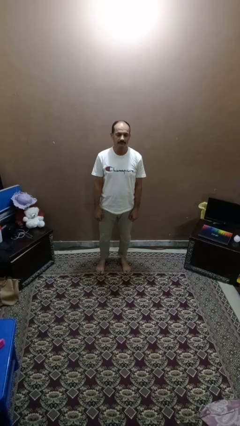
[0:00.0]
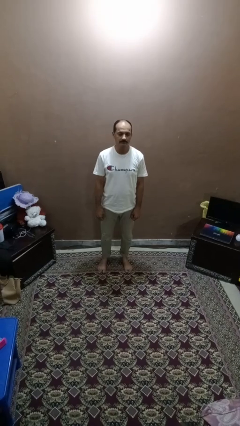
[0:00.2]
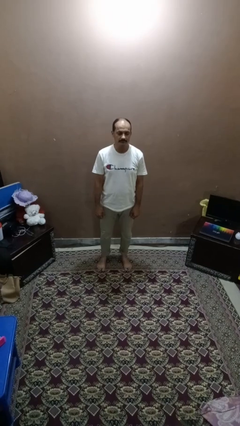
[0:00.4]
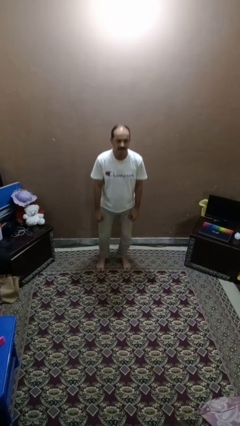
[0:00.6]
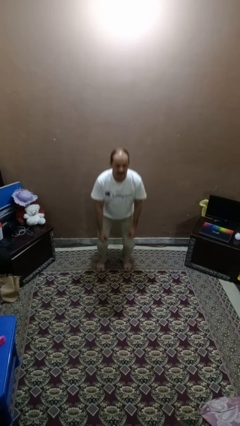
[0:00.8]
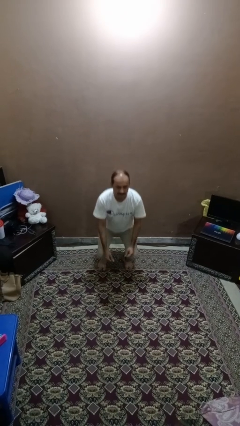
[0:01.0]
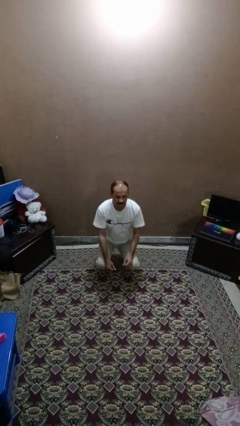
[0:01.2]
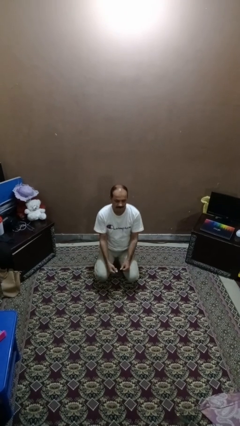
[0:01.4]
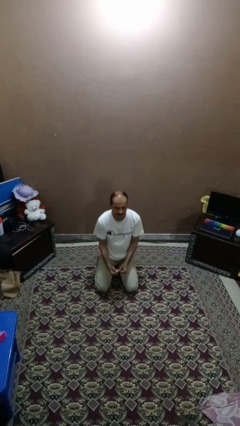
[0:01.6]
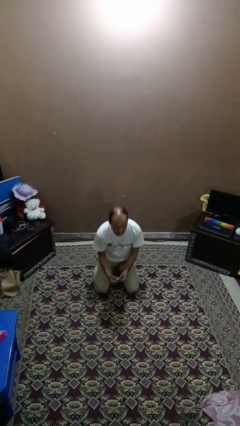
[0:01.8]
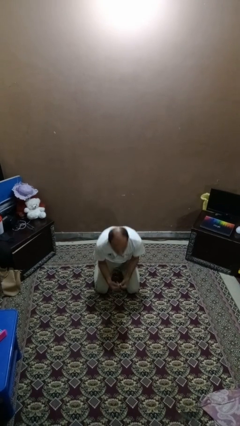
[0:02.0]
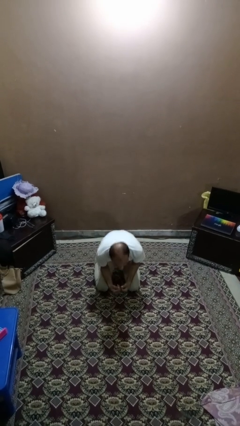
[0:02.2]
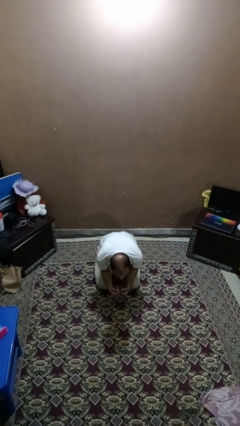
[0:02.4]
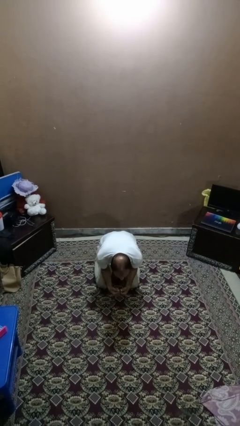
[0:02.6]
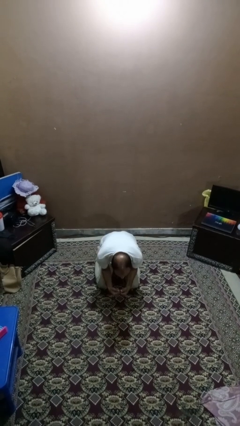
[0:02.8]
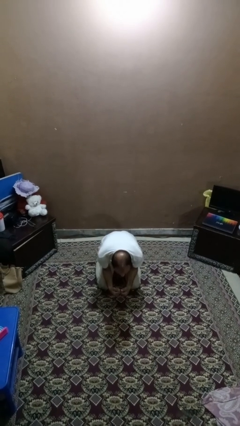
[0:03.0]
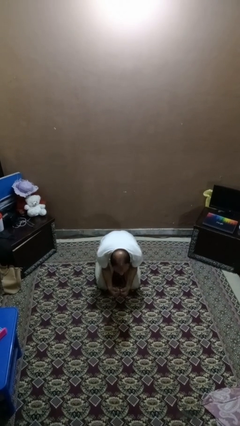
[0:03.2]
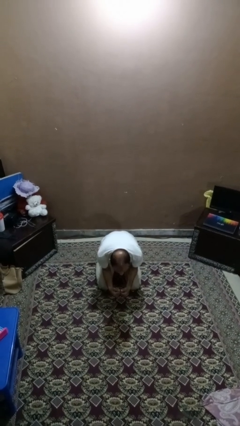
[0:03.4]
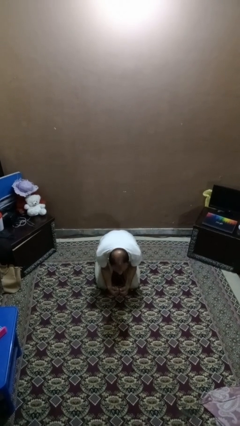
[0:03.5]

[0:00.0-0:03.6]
person kneels

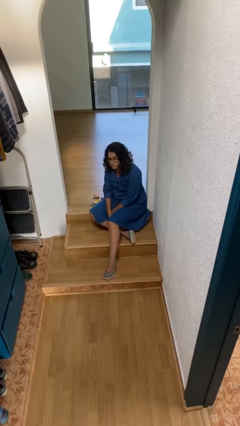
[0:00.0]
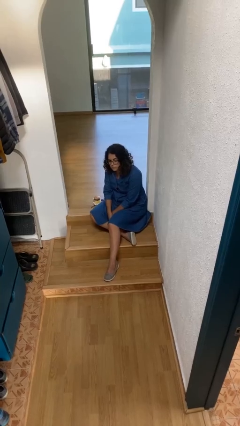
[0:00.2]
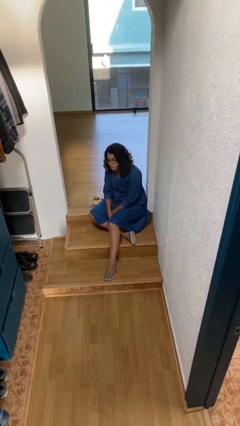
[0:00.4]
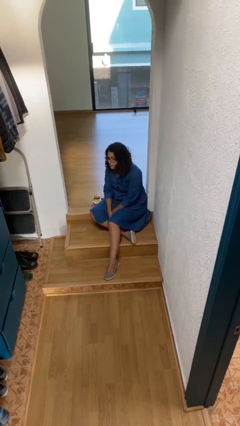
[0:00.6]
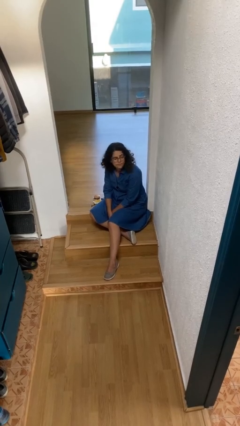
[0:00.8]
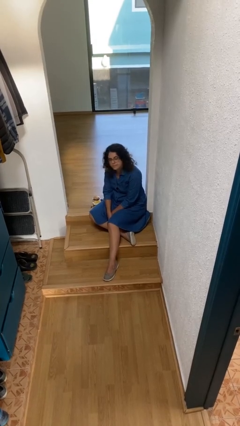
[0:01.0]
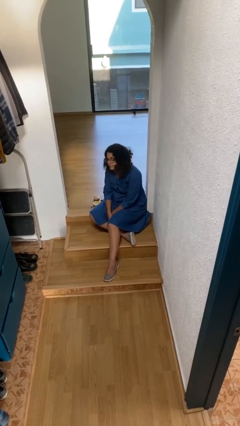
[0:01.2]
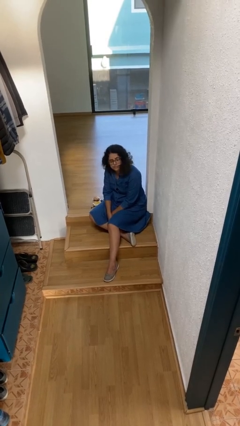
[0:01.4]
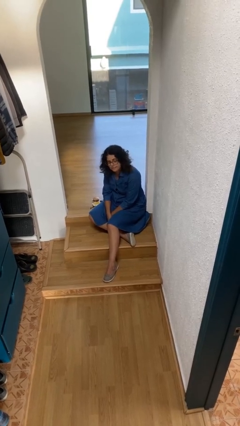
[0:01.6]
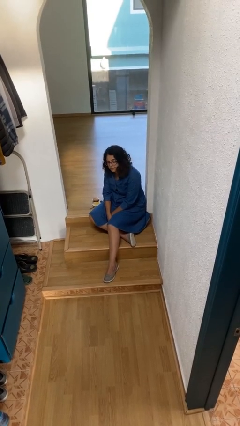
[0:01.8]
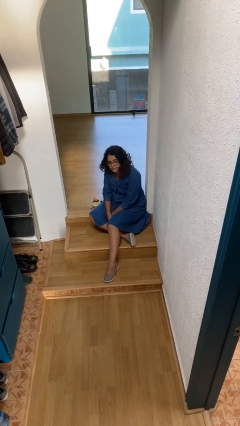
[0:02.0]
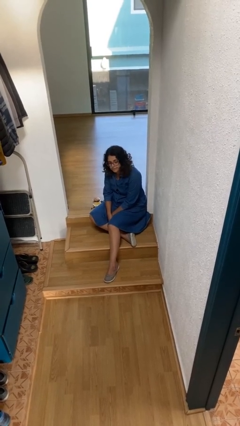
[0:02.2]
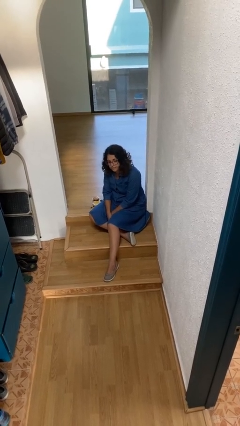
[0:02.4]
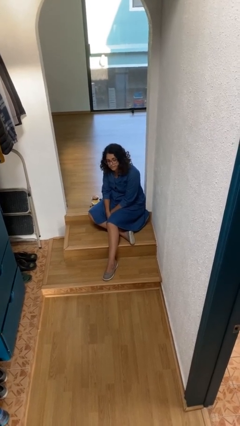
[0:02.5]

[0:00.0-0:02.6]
person shakes head

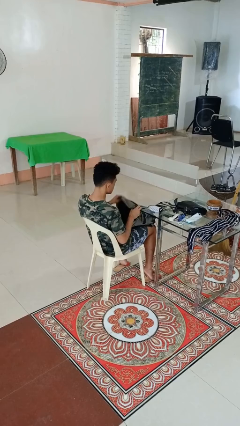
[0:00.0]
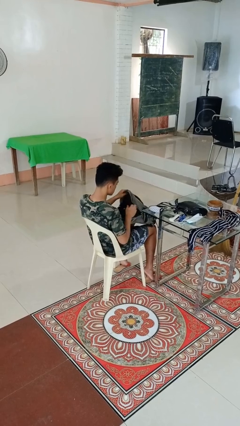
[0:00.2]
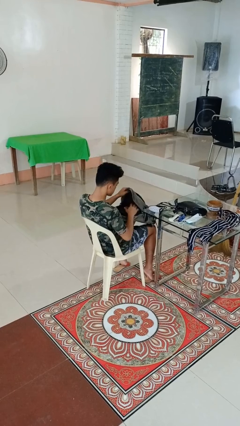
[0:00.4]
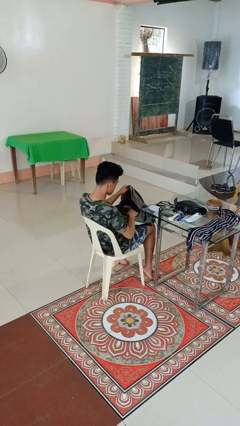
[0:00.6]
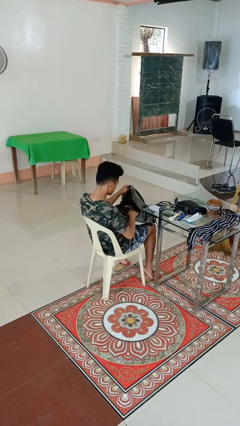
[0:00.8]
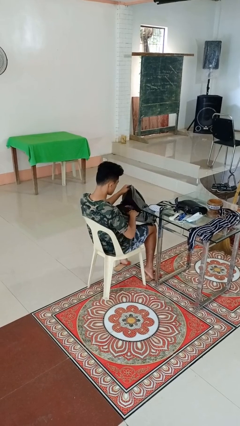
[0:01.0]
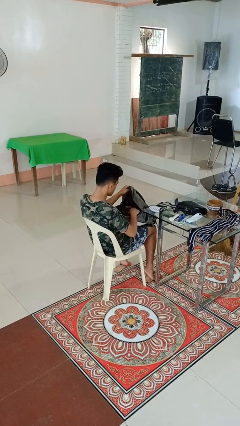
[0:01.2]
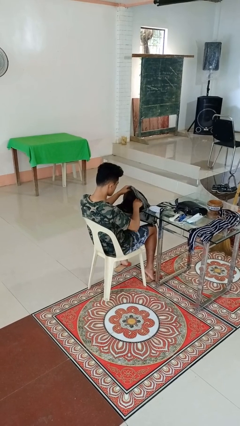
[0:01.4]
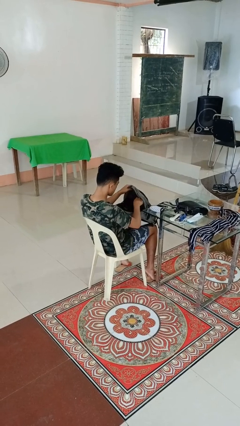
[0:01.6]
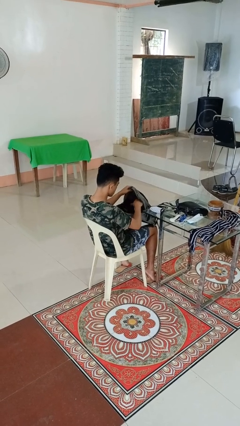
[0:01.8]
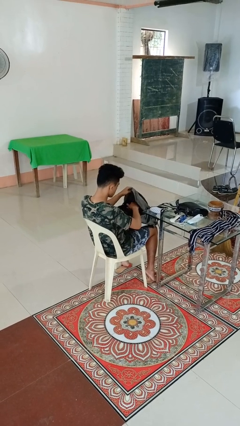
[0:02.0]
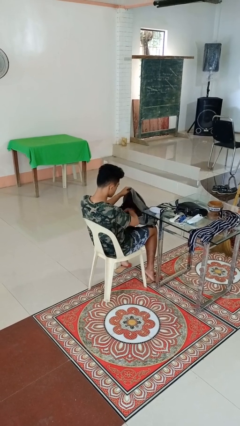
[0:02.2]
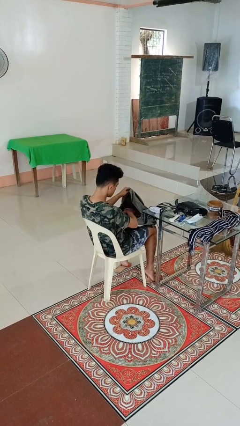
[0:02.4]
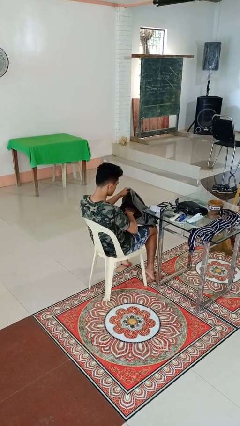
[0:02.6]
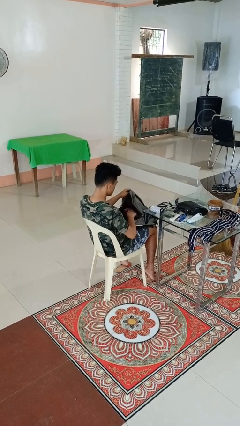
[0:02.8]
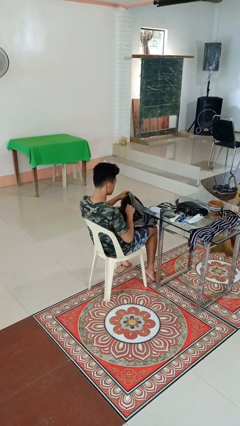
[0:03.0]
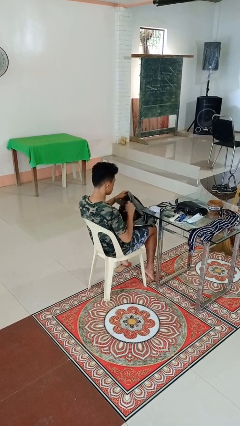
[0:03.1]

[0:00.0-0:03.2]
person searches in backpack

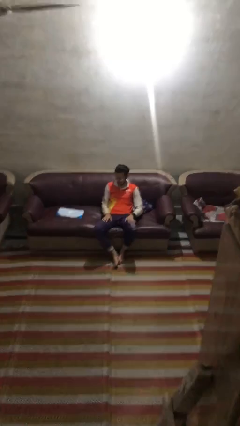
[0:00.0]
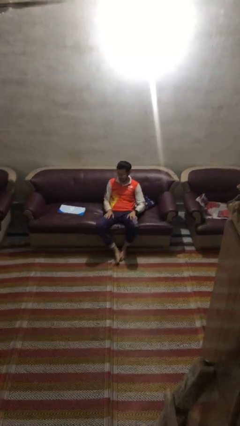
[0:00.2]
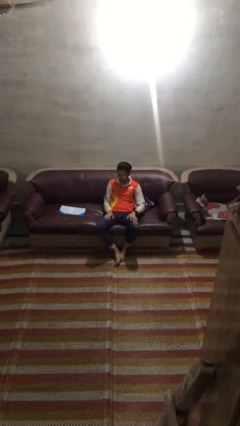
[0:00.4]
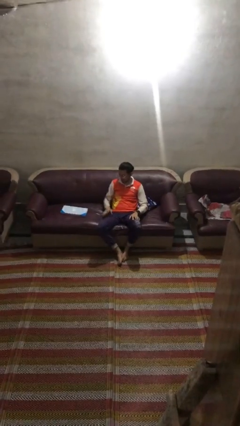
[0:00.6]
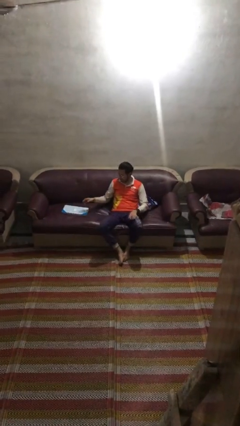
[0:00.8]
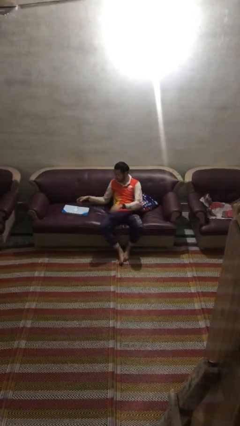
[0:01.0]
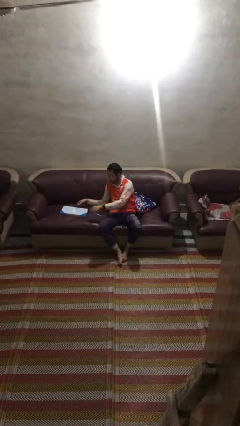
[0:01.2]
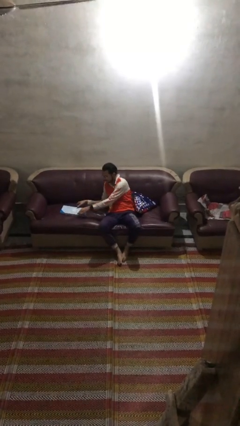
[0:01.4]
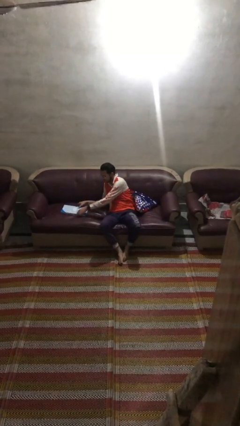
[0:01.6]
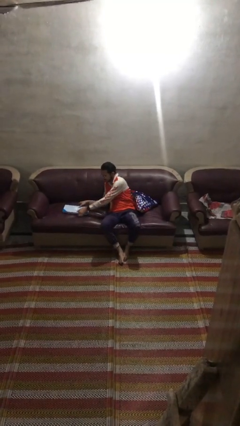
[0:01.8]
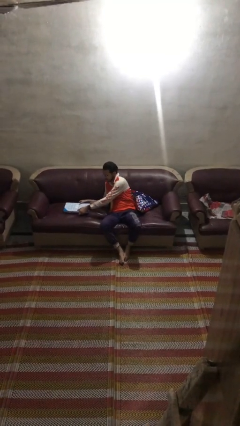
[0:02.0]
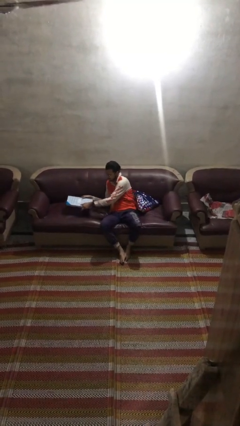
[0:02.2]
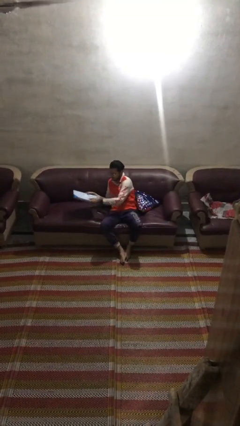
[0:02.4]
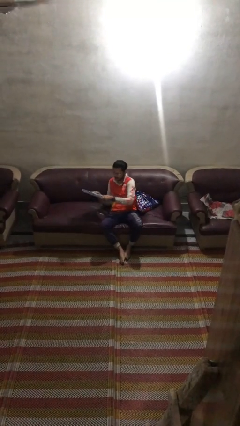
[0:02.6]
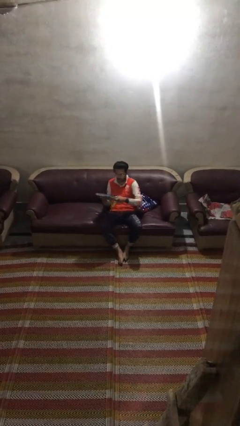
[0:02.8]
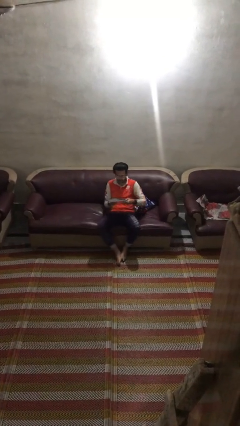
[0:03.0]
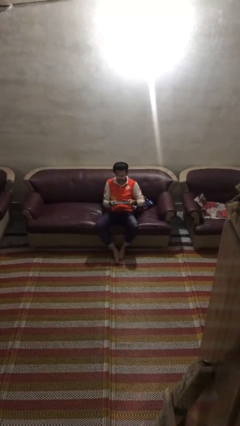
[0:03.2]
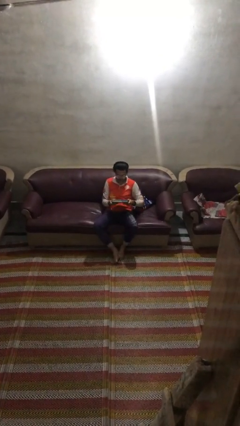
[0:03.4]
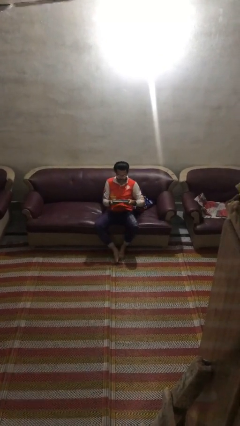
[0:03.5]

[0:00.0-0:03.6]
person picks up object from couch

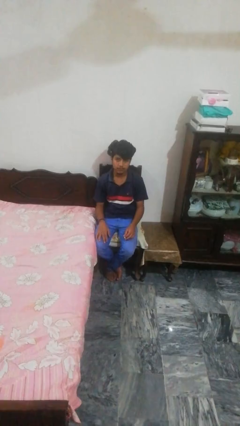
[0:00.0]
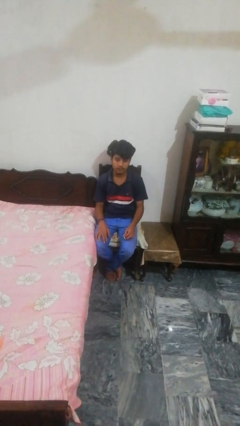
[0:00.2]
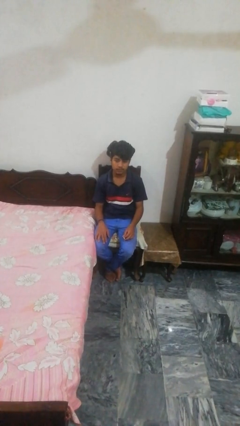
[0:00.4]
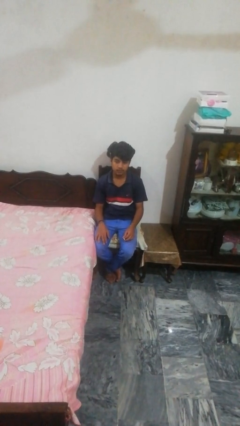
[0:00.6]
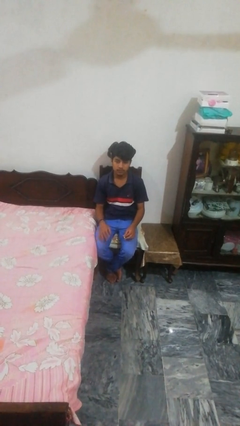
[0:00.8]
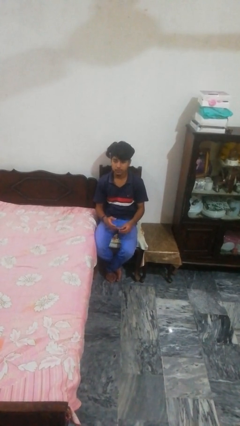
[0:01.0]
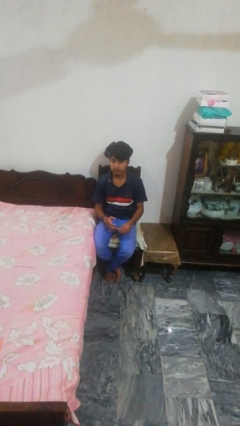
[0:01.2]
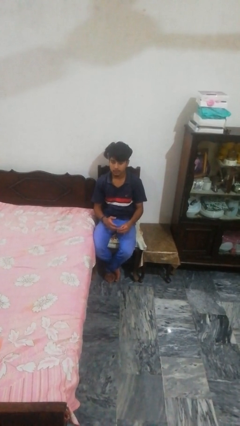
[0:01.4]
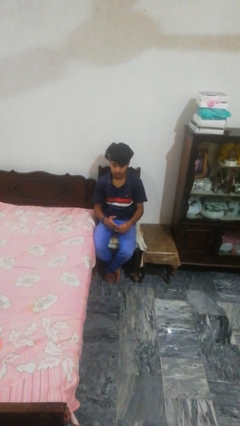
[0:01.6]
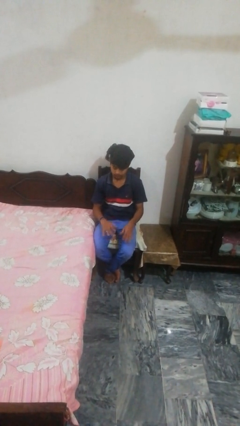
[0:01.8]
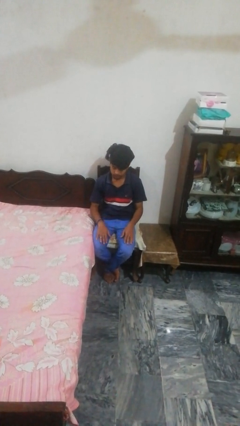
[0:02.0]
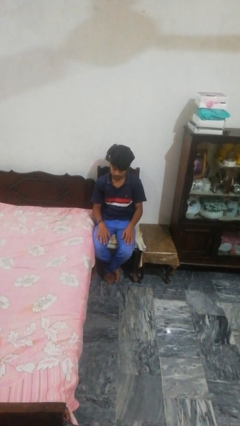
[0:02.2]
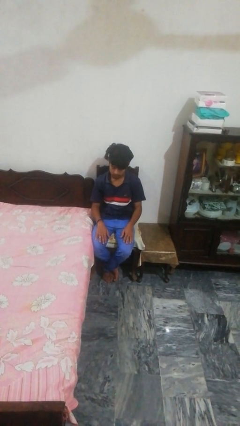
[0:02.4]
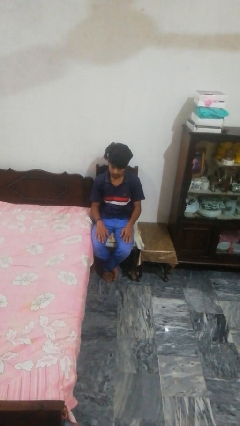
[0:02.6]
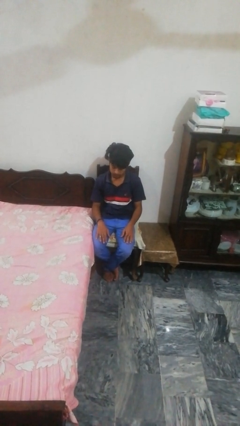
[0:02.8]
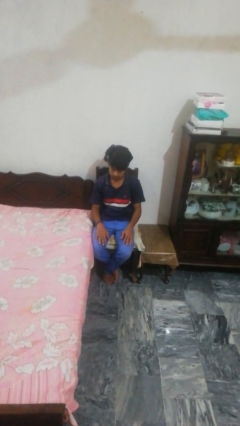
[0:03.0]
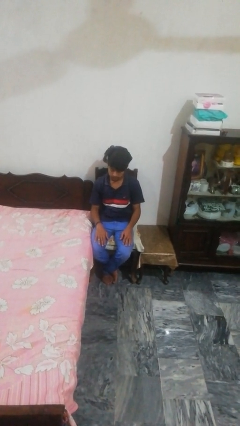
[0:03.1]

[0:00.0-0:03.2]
person puts on ring

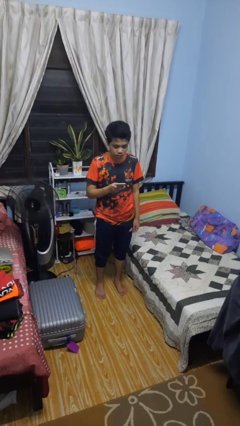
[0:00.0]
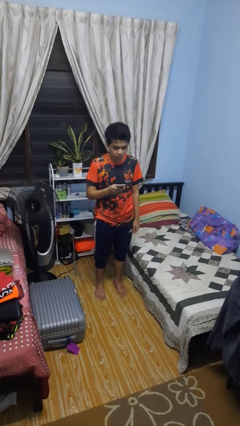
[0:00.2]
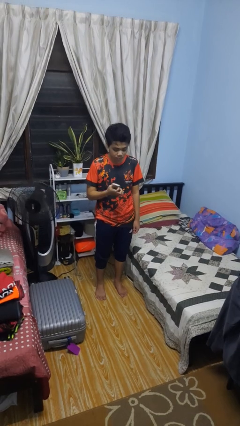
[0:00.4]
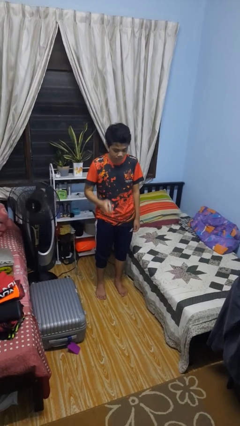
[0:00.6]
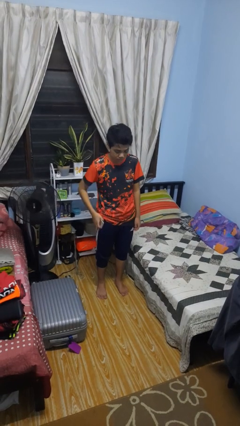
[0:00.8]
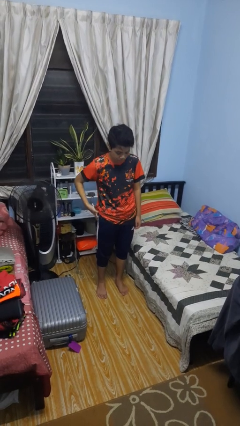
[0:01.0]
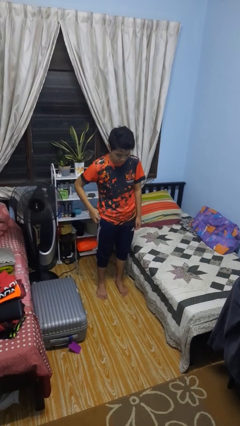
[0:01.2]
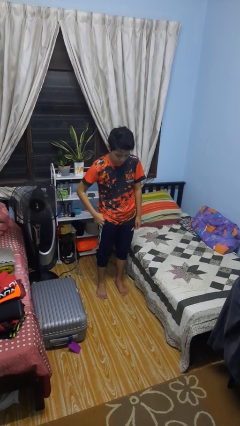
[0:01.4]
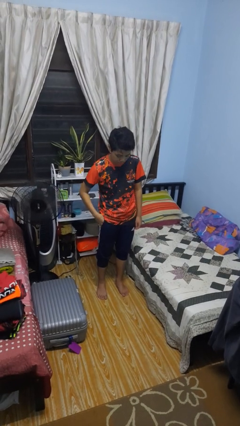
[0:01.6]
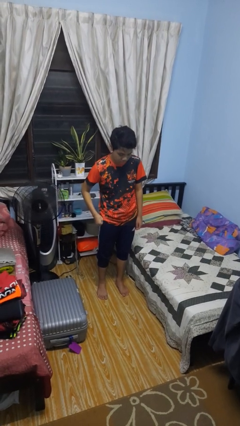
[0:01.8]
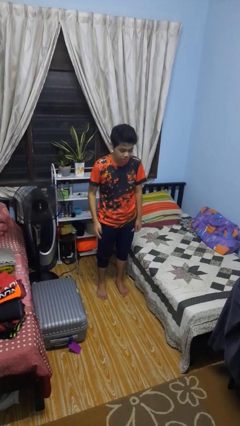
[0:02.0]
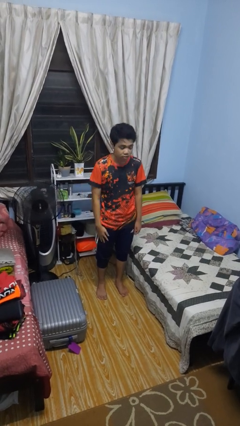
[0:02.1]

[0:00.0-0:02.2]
person puts phone into pocket
